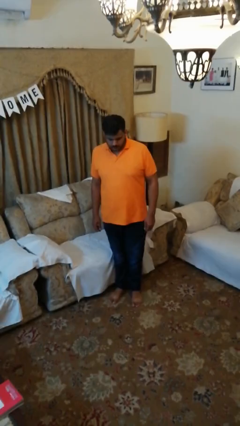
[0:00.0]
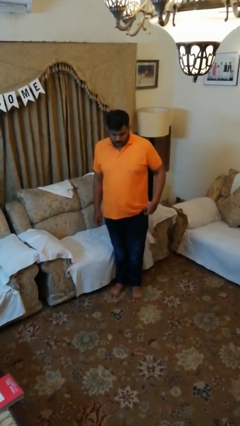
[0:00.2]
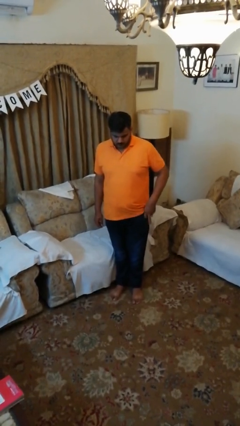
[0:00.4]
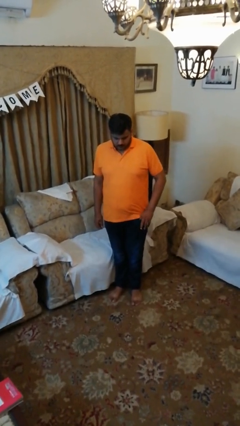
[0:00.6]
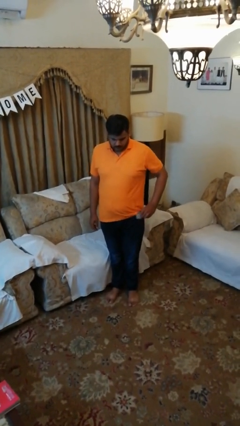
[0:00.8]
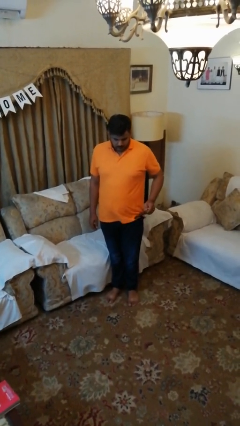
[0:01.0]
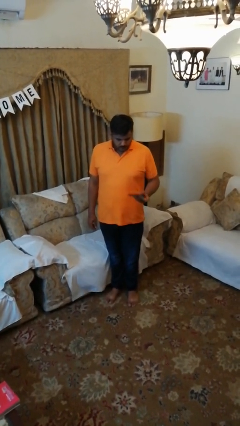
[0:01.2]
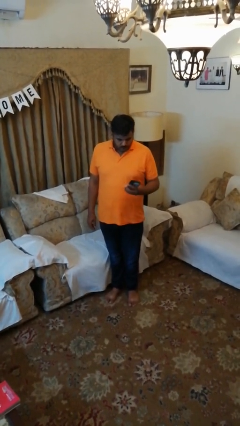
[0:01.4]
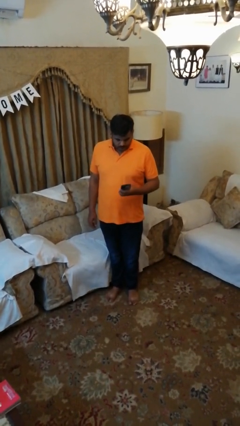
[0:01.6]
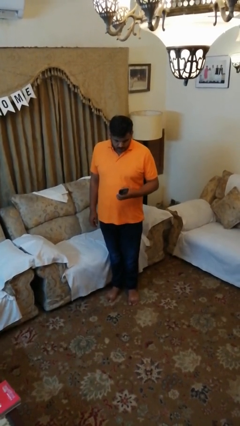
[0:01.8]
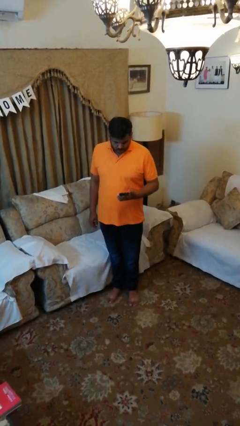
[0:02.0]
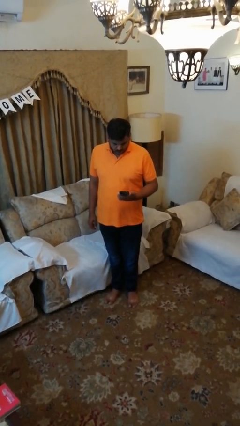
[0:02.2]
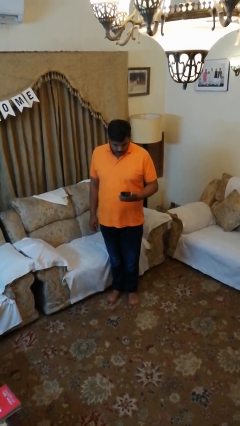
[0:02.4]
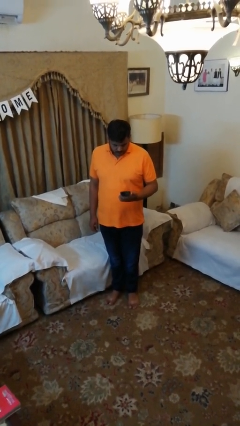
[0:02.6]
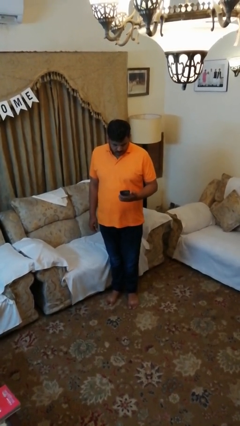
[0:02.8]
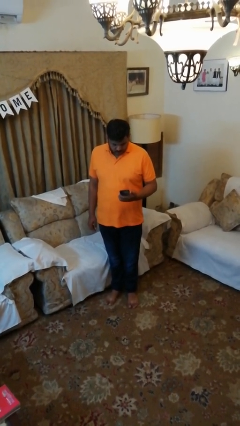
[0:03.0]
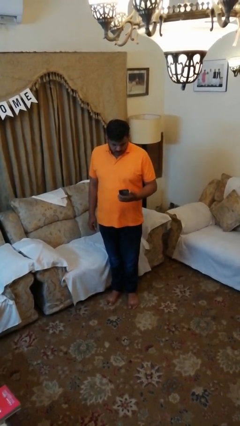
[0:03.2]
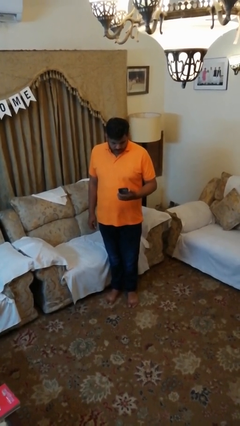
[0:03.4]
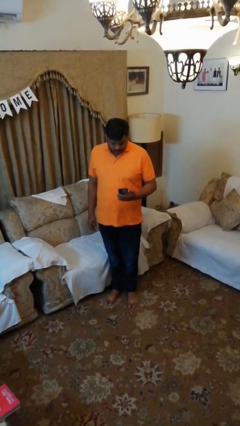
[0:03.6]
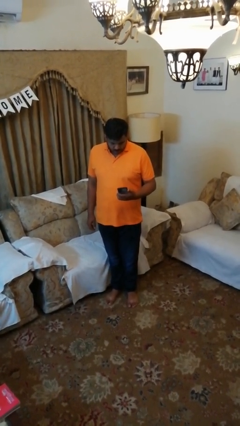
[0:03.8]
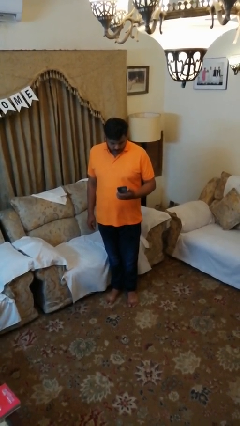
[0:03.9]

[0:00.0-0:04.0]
person takes phone from pocket

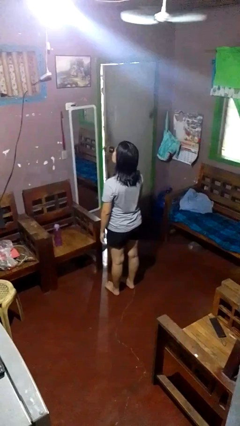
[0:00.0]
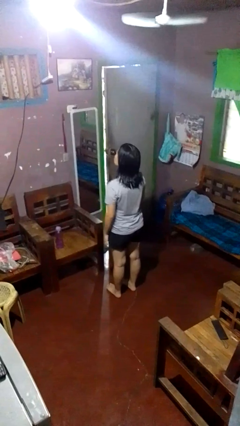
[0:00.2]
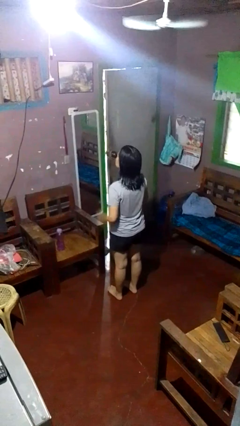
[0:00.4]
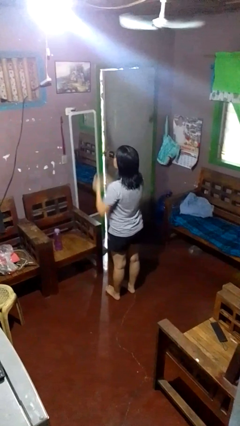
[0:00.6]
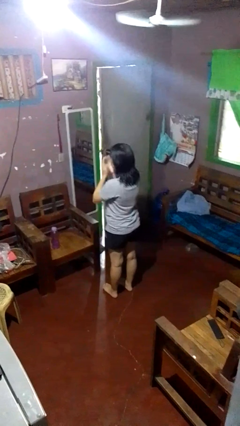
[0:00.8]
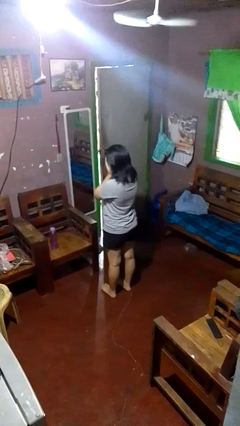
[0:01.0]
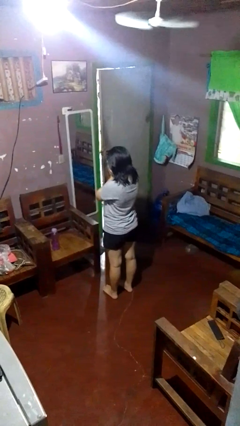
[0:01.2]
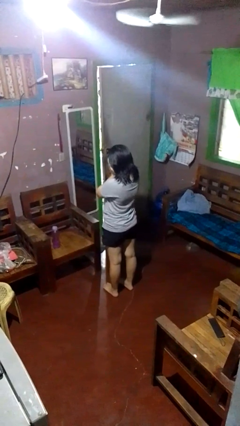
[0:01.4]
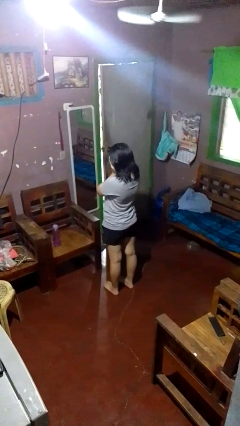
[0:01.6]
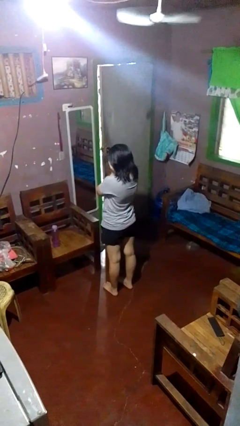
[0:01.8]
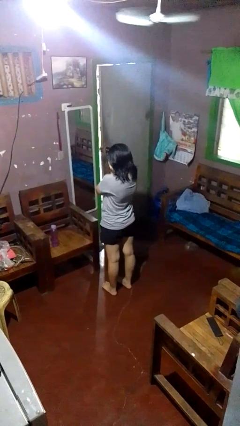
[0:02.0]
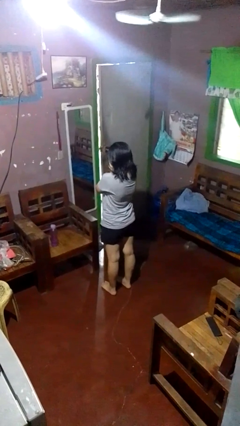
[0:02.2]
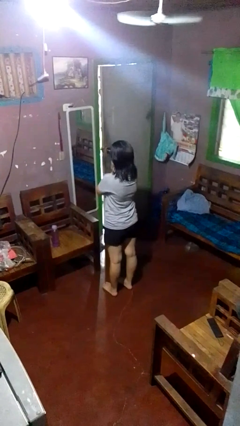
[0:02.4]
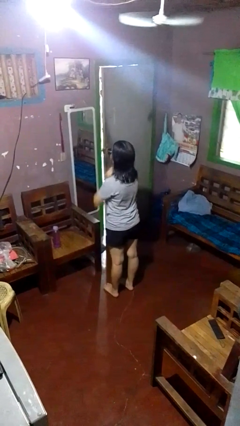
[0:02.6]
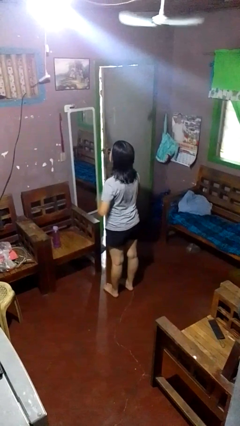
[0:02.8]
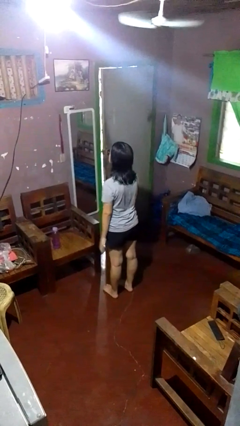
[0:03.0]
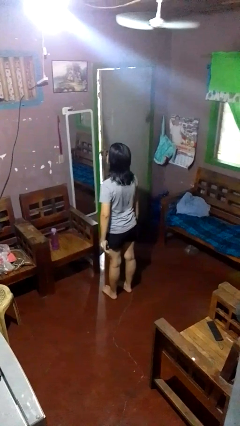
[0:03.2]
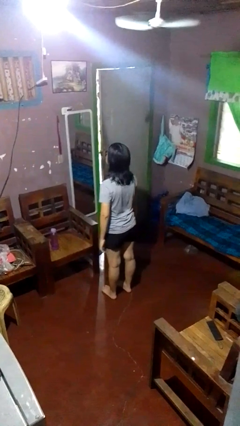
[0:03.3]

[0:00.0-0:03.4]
person covers face with hands

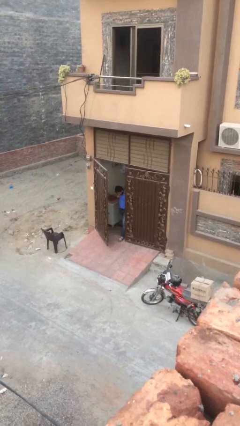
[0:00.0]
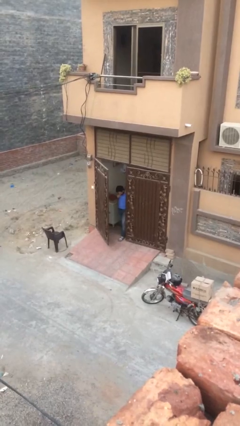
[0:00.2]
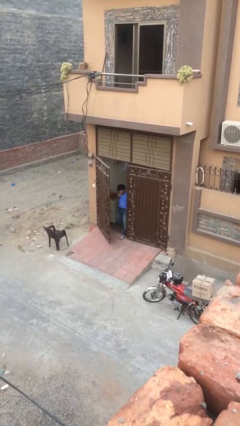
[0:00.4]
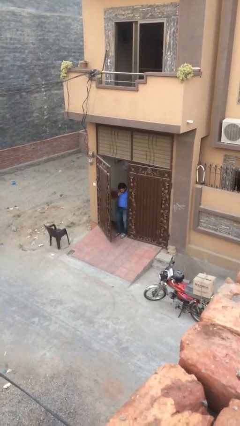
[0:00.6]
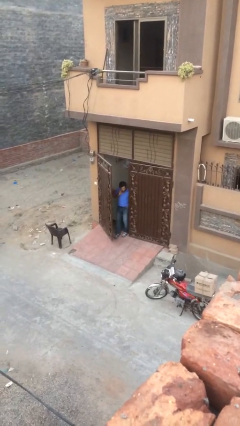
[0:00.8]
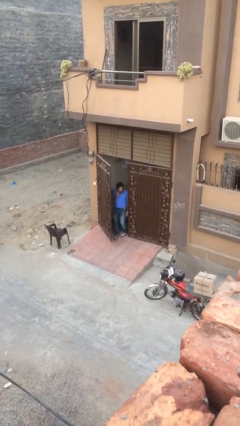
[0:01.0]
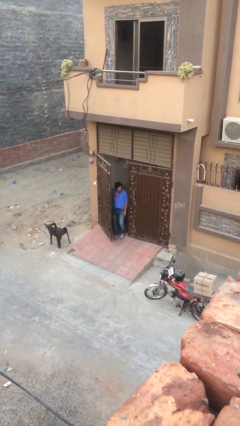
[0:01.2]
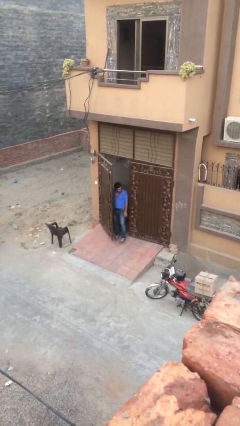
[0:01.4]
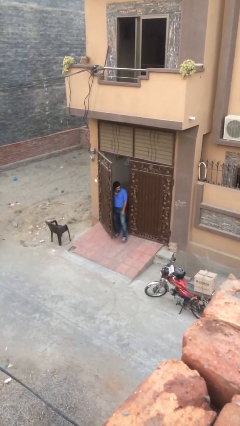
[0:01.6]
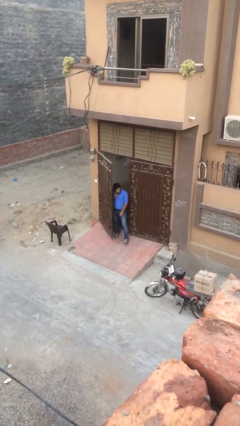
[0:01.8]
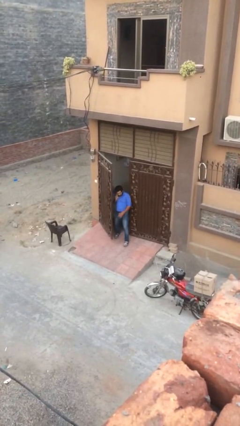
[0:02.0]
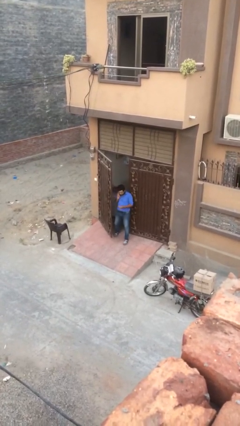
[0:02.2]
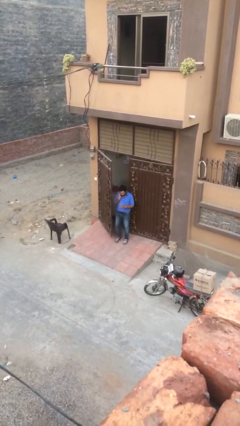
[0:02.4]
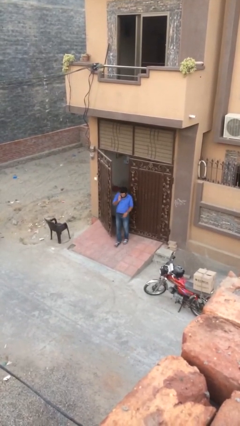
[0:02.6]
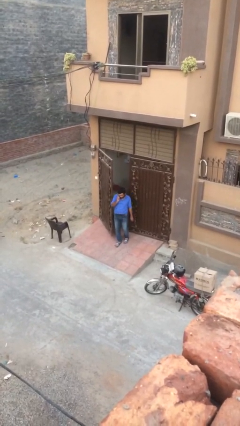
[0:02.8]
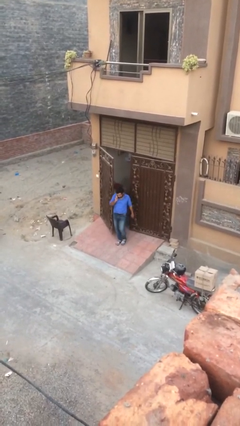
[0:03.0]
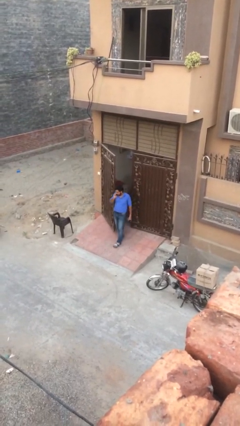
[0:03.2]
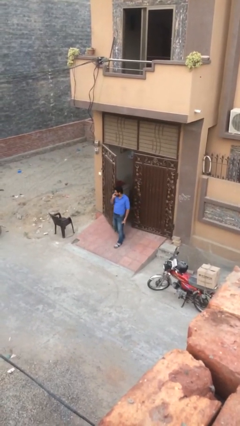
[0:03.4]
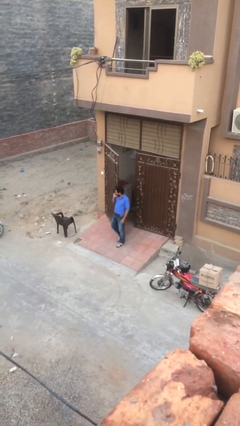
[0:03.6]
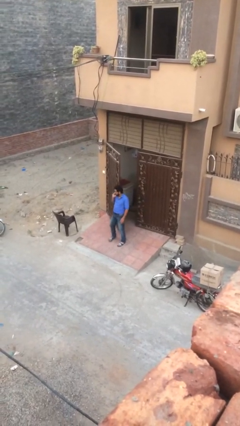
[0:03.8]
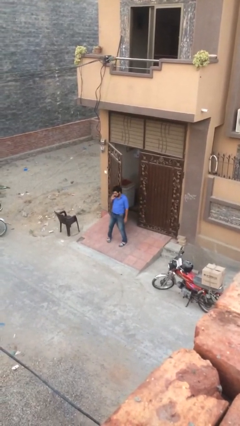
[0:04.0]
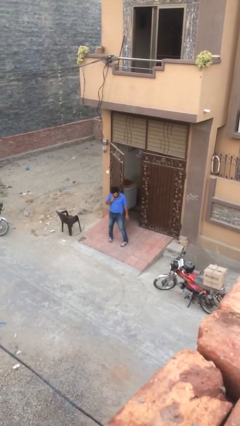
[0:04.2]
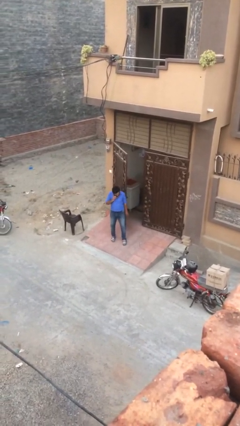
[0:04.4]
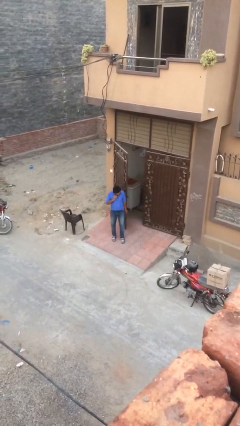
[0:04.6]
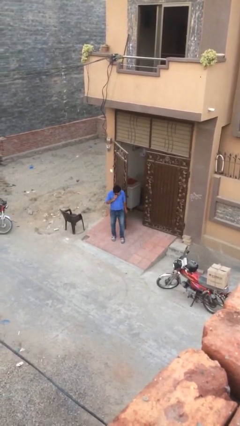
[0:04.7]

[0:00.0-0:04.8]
person enters scene through structure

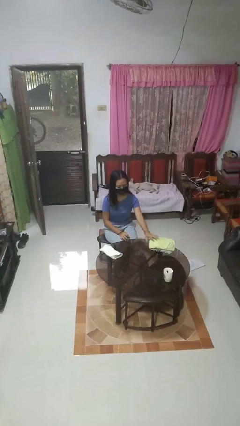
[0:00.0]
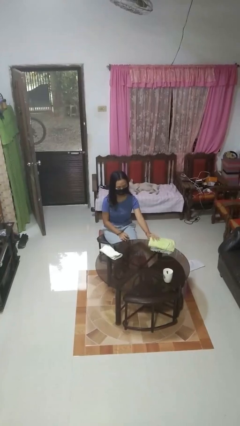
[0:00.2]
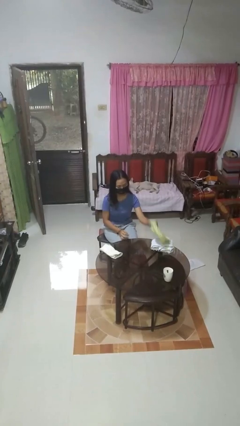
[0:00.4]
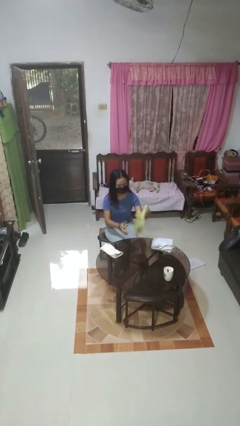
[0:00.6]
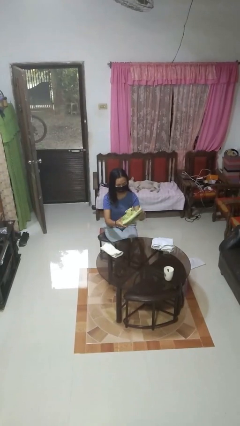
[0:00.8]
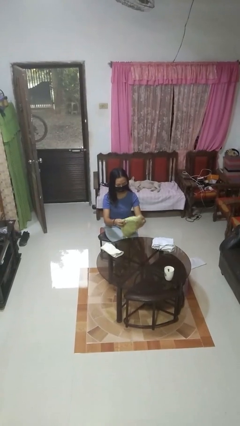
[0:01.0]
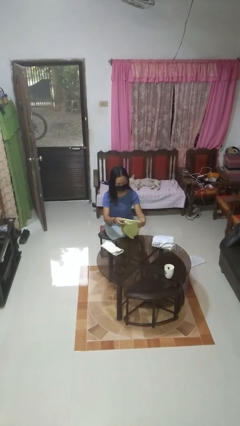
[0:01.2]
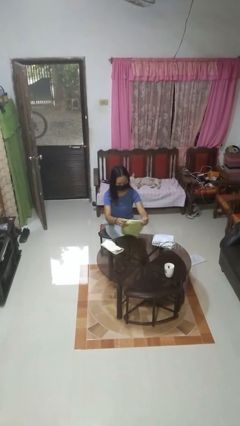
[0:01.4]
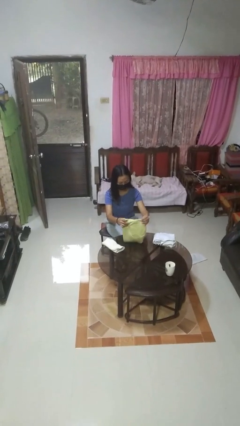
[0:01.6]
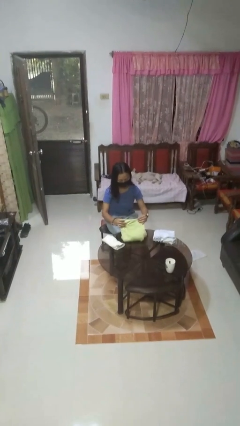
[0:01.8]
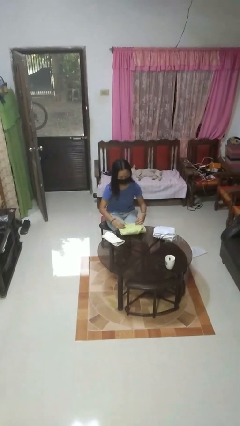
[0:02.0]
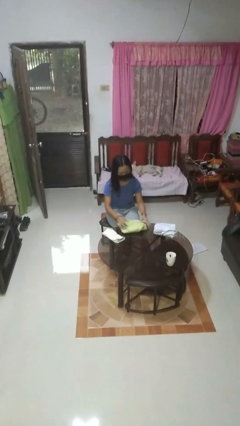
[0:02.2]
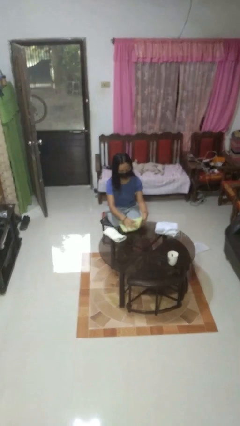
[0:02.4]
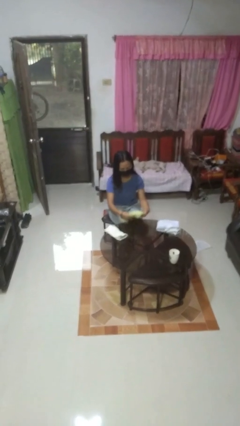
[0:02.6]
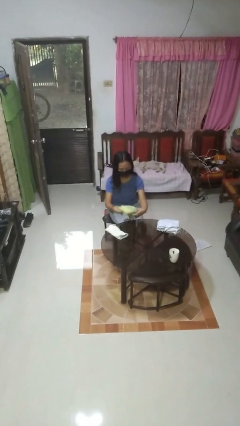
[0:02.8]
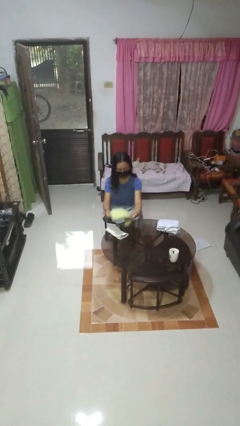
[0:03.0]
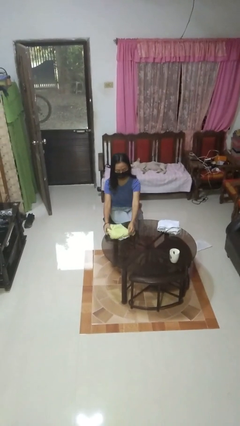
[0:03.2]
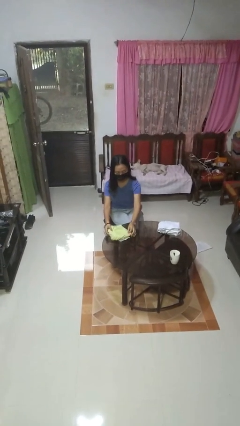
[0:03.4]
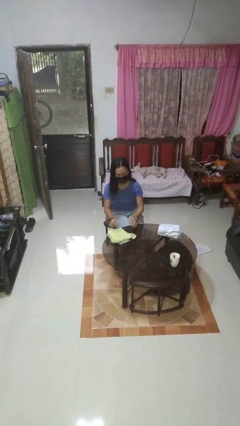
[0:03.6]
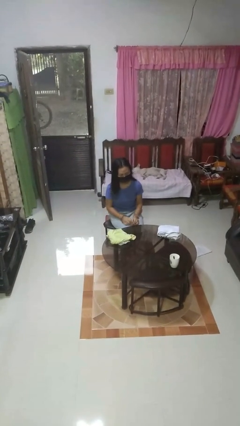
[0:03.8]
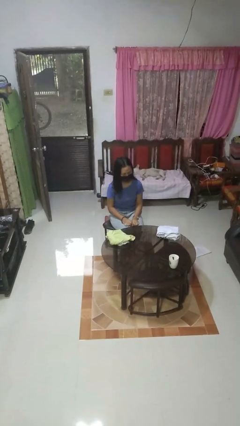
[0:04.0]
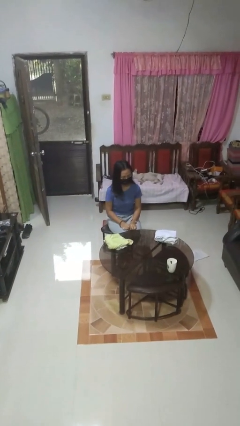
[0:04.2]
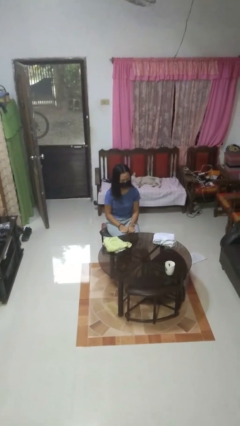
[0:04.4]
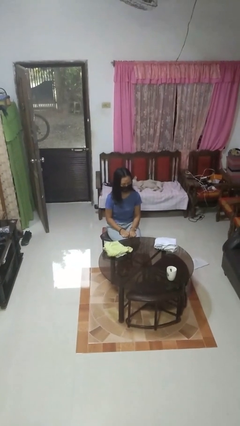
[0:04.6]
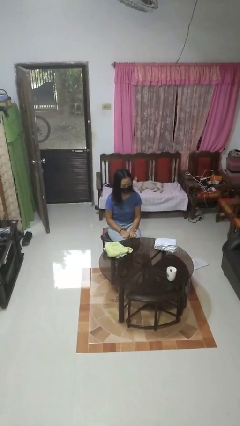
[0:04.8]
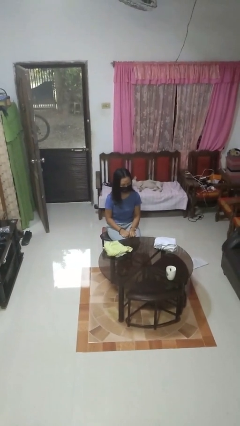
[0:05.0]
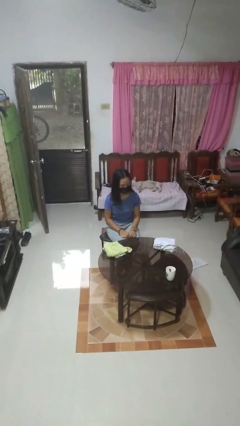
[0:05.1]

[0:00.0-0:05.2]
person folds towel

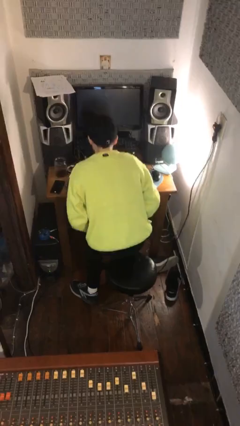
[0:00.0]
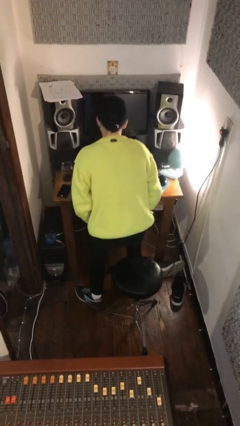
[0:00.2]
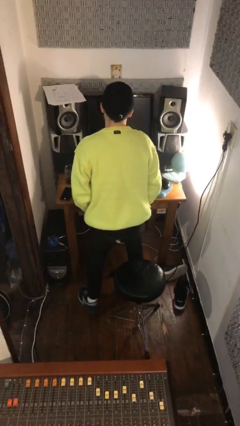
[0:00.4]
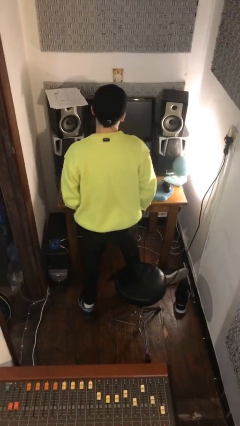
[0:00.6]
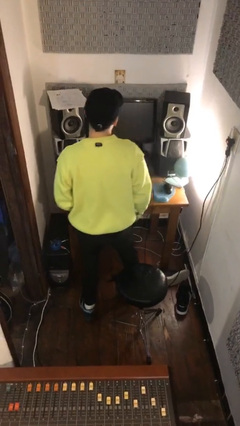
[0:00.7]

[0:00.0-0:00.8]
person stands up
